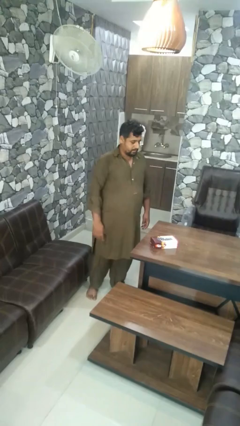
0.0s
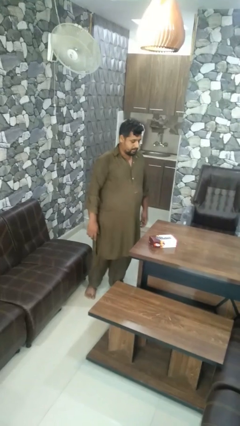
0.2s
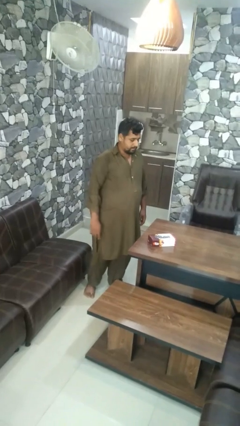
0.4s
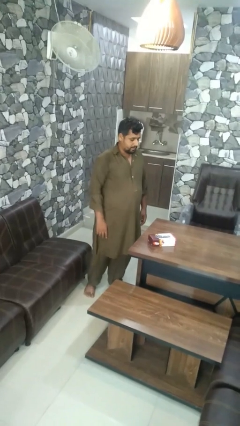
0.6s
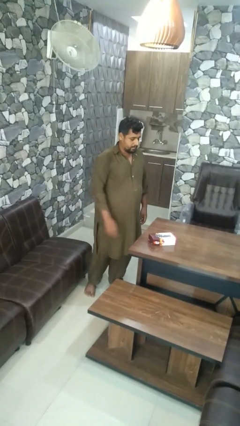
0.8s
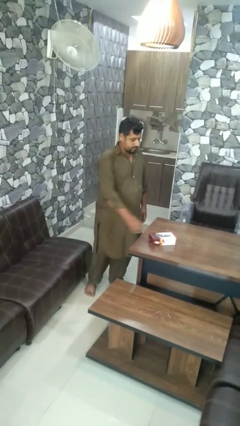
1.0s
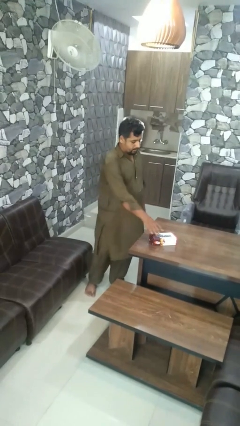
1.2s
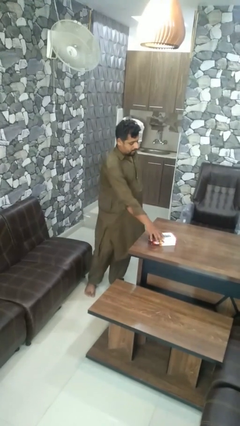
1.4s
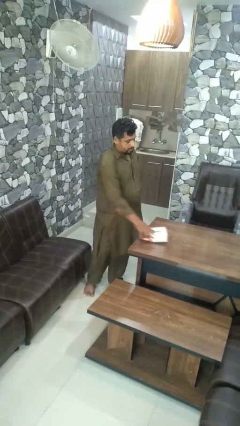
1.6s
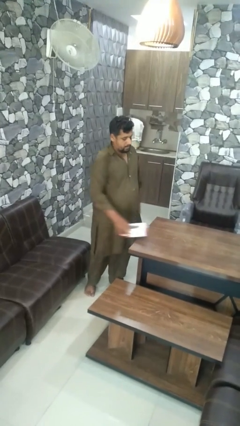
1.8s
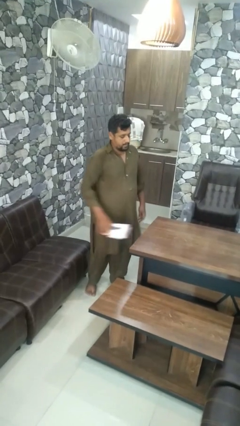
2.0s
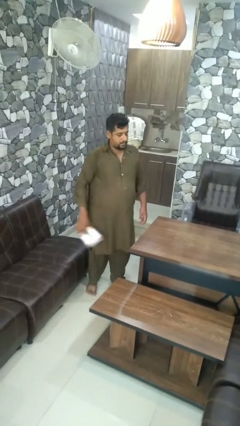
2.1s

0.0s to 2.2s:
person picks up object from table

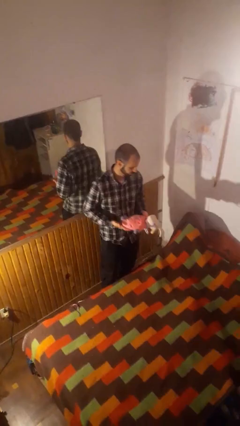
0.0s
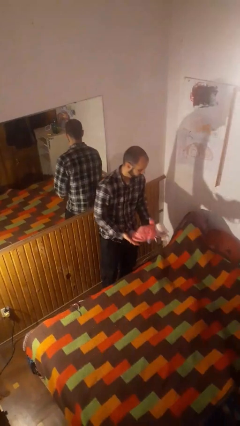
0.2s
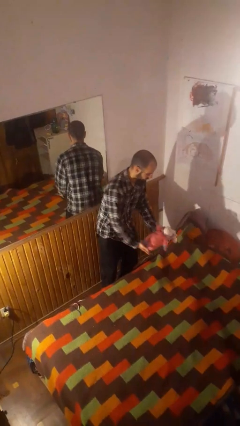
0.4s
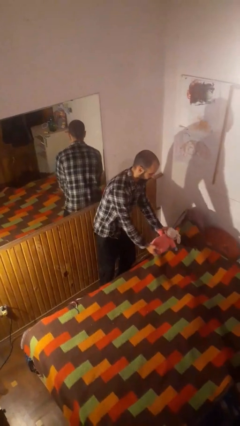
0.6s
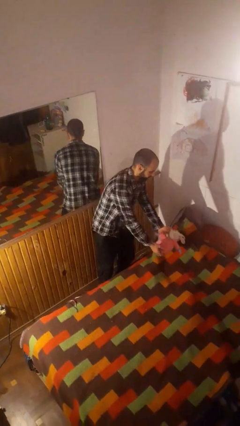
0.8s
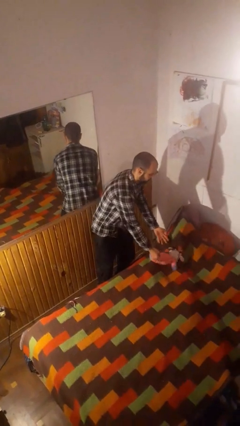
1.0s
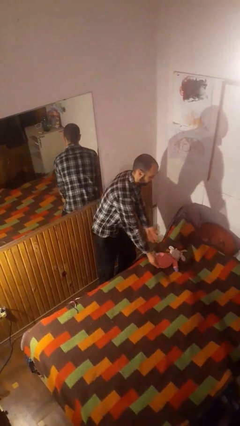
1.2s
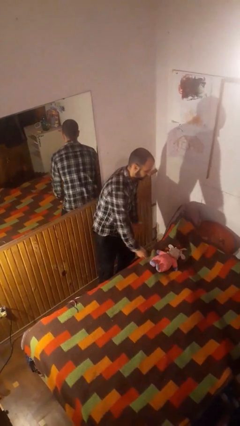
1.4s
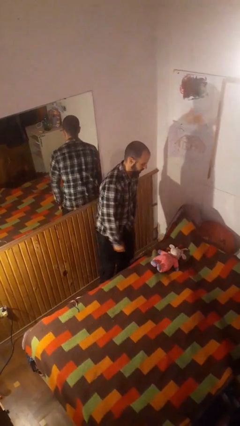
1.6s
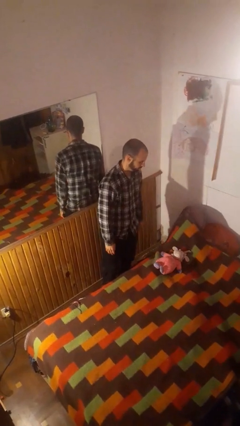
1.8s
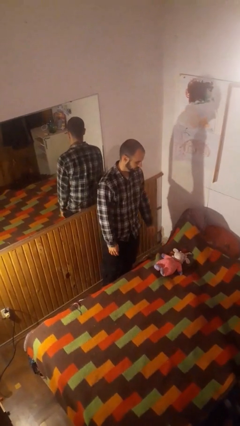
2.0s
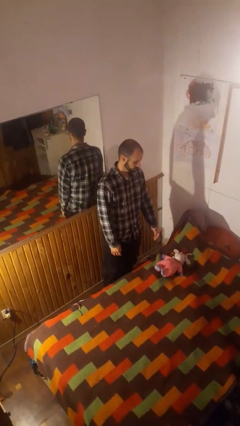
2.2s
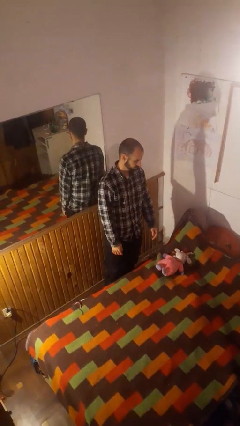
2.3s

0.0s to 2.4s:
person puts down object on bed

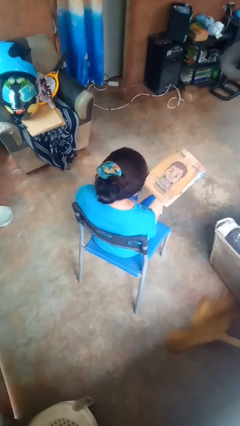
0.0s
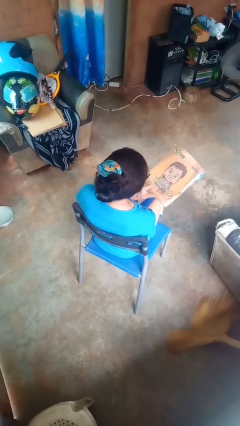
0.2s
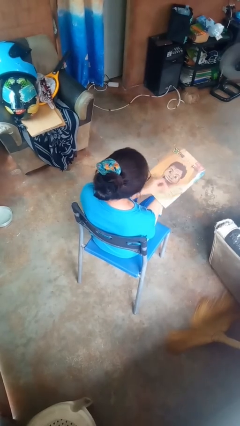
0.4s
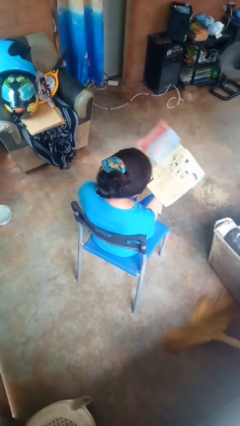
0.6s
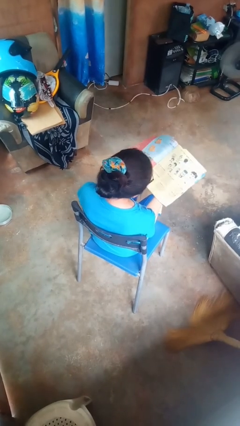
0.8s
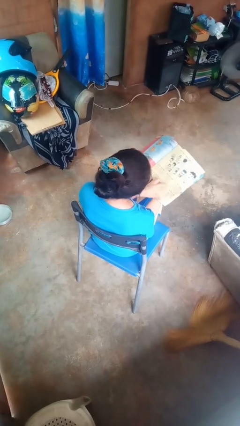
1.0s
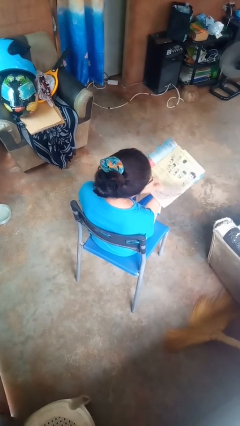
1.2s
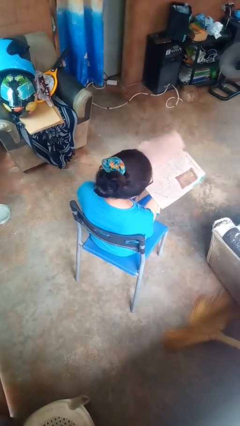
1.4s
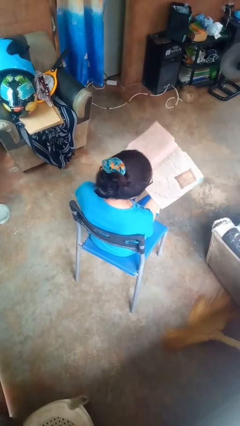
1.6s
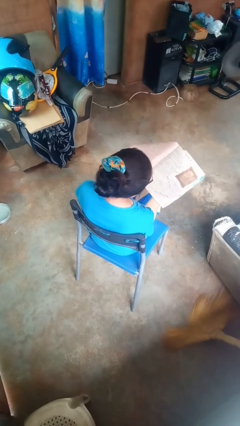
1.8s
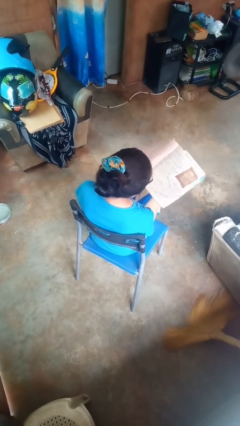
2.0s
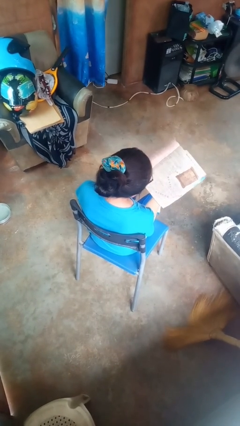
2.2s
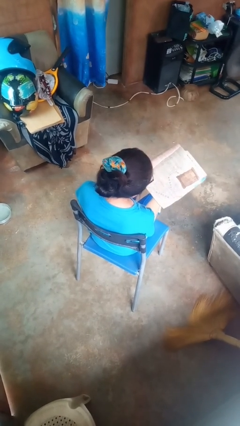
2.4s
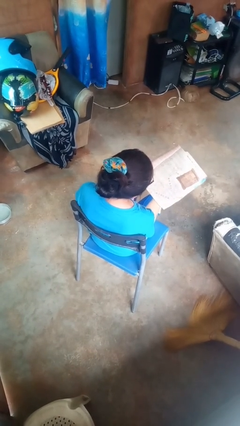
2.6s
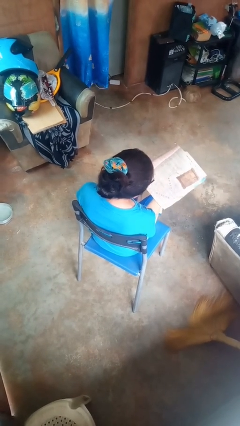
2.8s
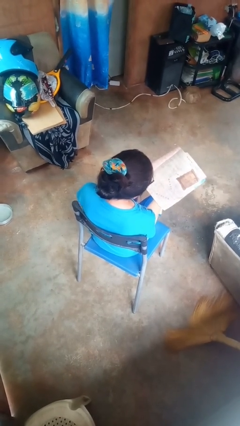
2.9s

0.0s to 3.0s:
person reads magazine

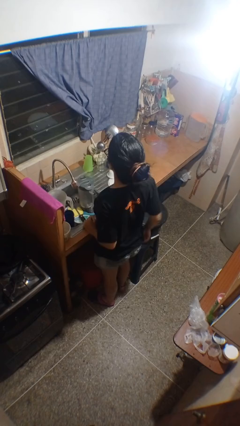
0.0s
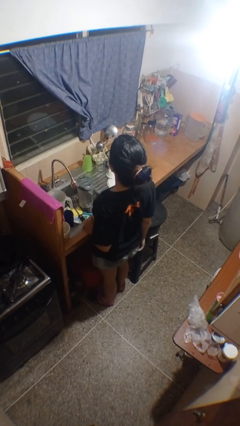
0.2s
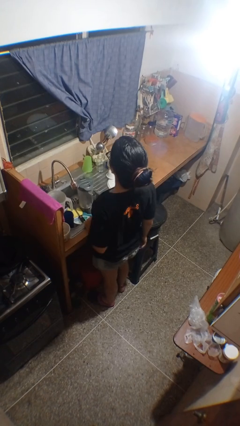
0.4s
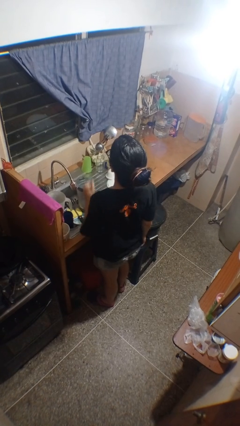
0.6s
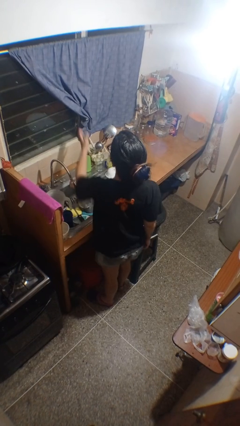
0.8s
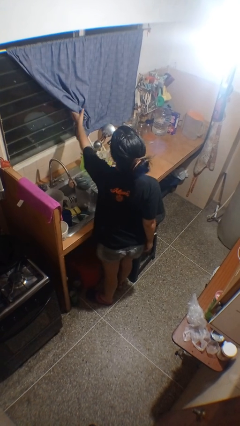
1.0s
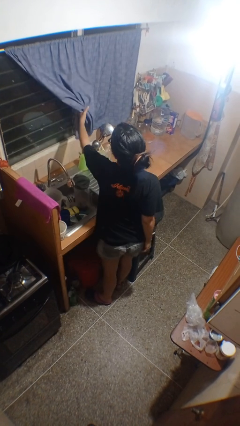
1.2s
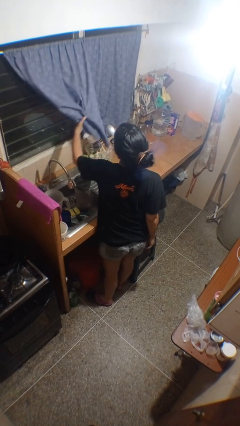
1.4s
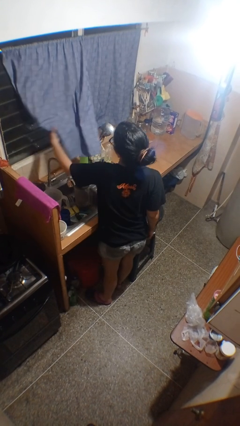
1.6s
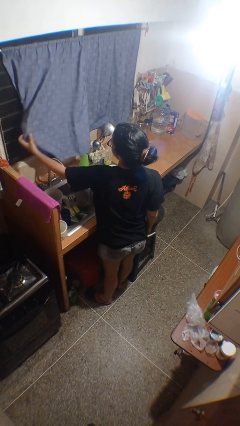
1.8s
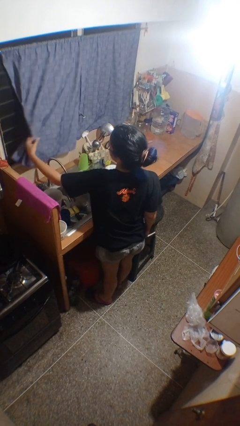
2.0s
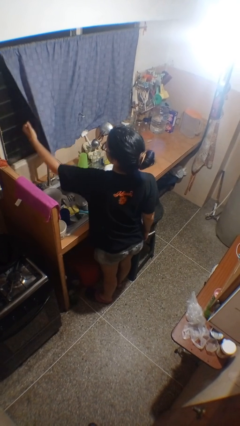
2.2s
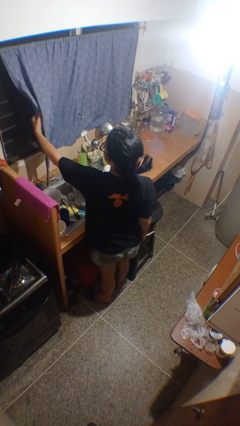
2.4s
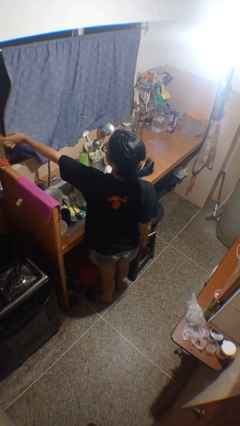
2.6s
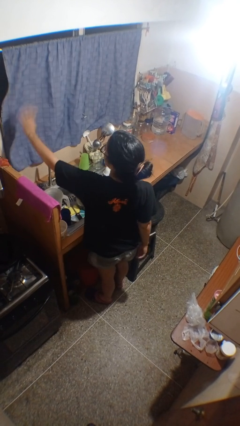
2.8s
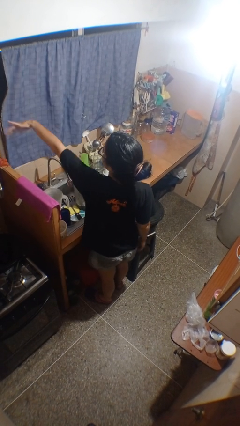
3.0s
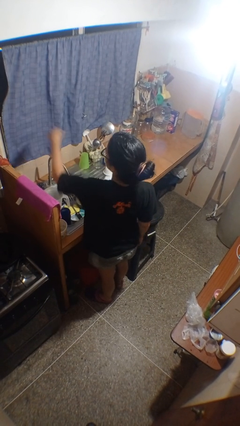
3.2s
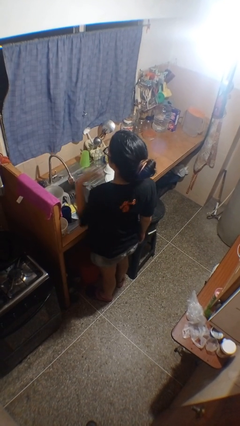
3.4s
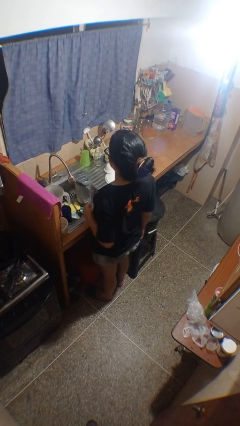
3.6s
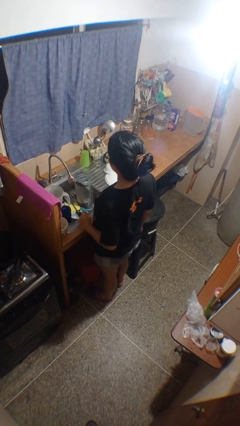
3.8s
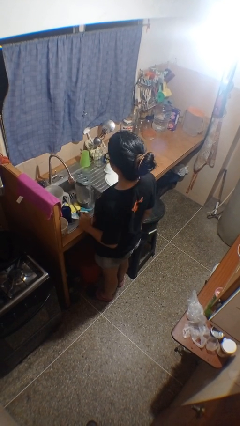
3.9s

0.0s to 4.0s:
person closes curtains

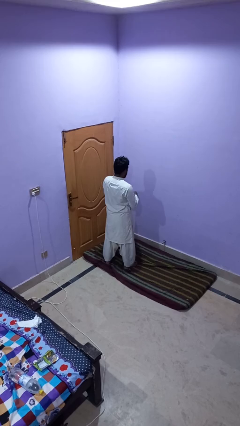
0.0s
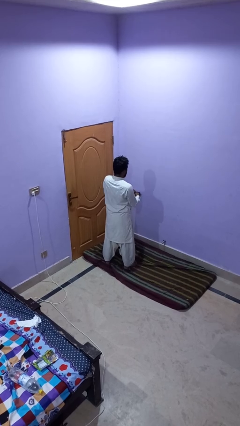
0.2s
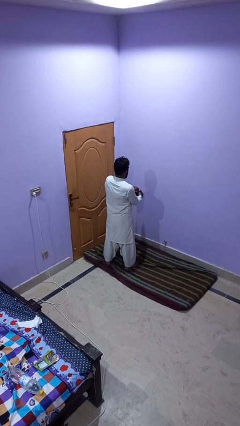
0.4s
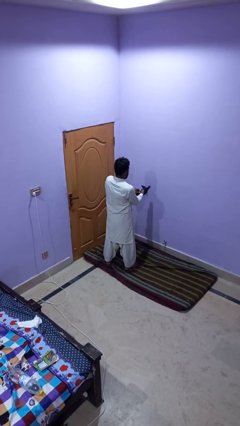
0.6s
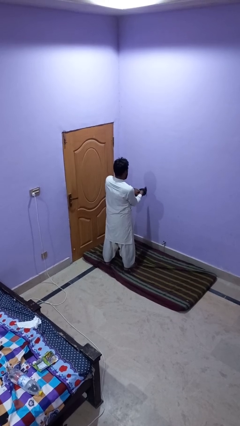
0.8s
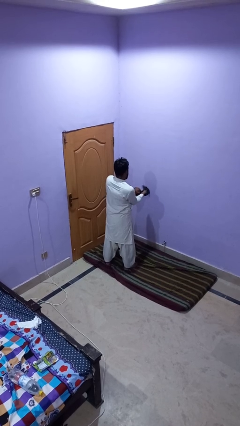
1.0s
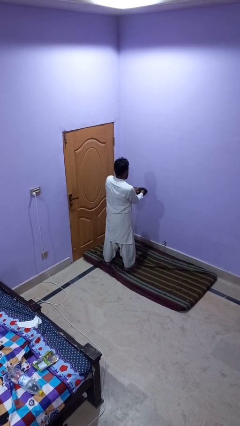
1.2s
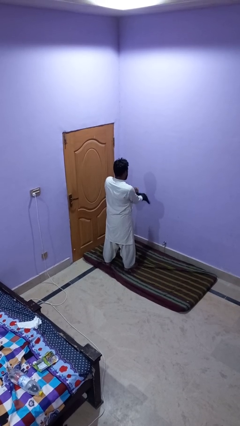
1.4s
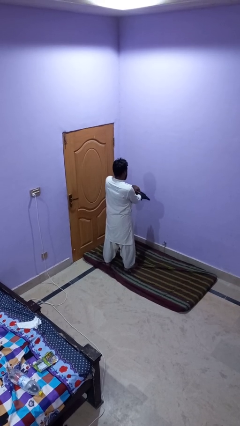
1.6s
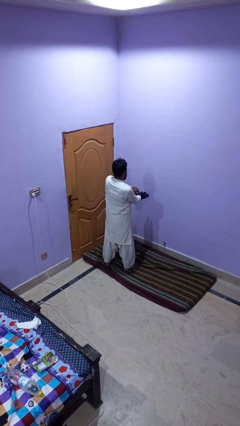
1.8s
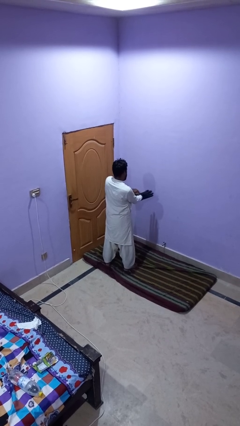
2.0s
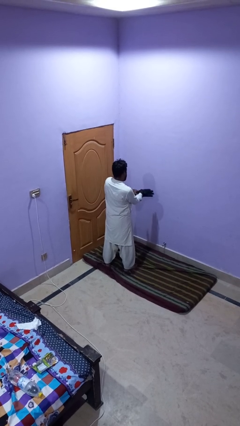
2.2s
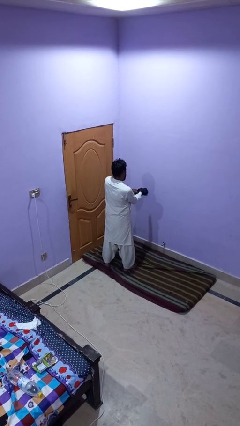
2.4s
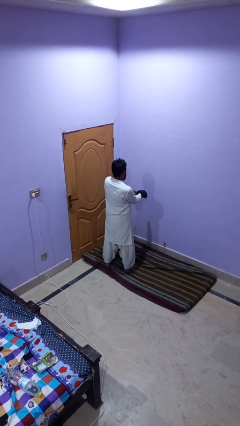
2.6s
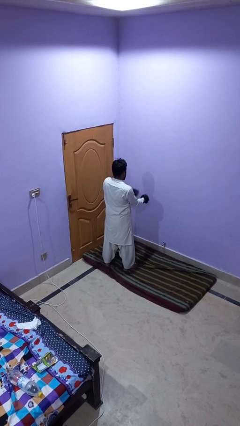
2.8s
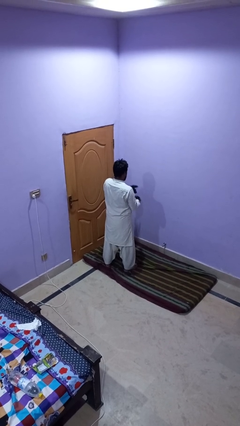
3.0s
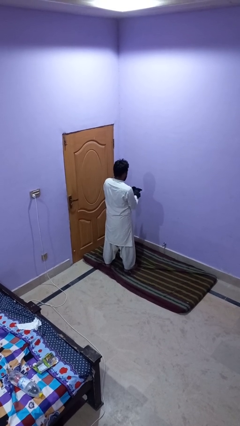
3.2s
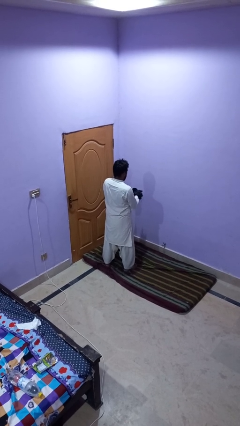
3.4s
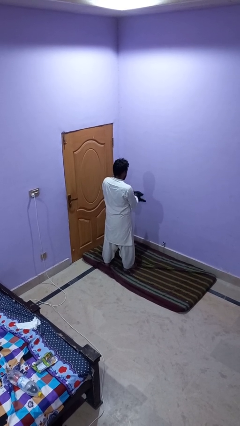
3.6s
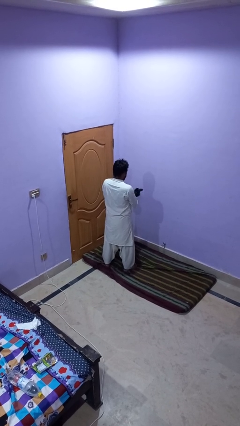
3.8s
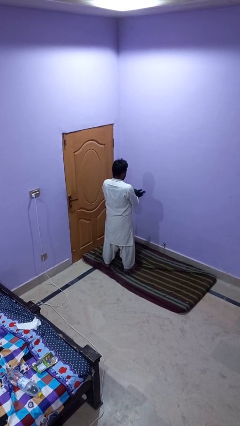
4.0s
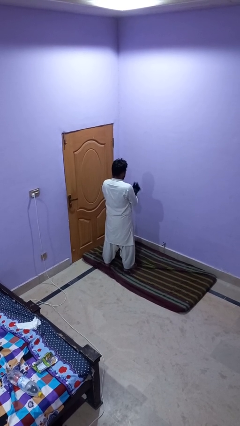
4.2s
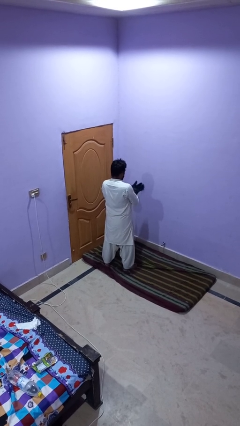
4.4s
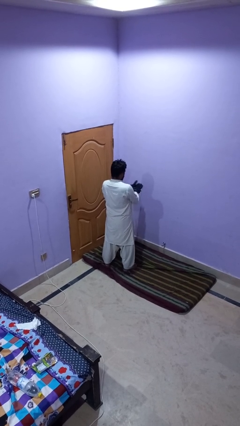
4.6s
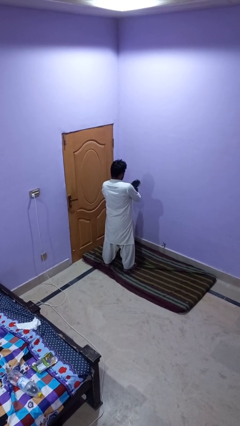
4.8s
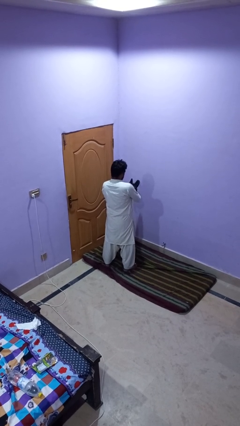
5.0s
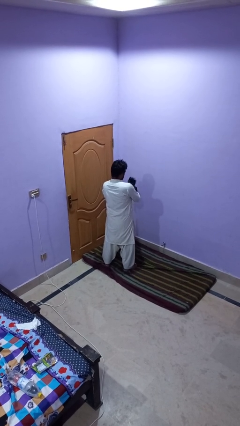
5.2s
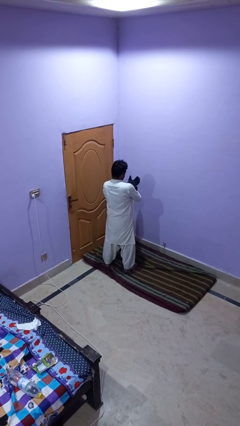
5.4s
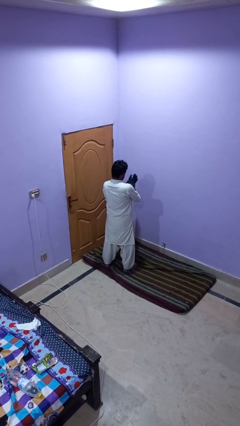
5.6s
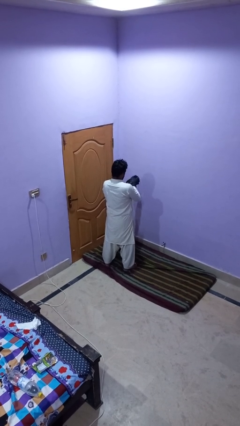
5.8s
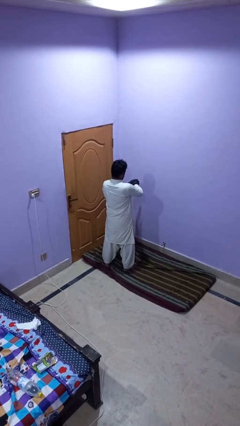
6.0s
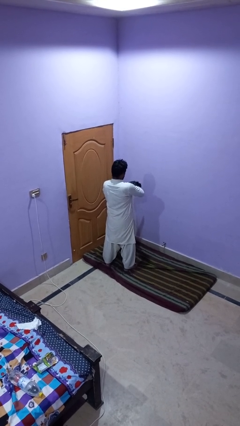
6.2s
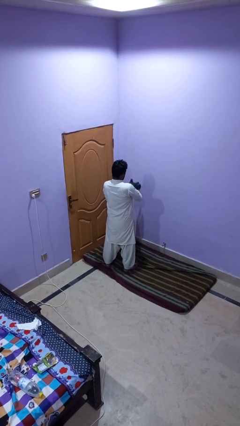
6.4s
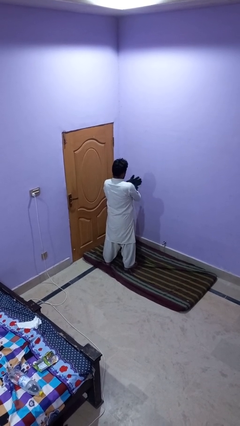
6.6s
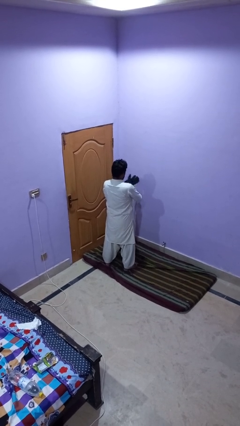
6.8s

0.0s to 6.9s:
person puts on gloves
